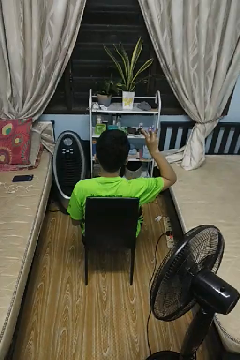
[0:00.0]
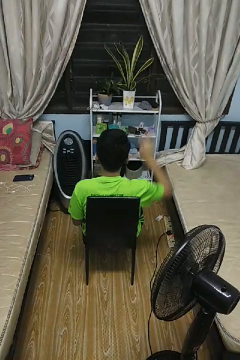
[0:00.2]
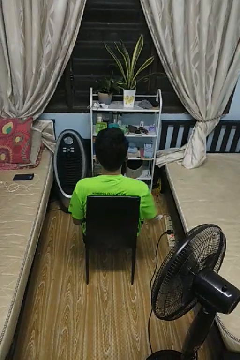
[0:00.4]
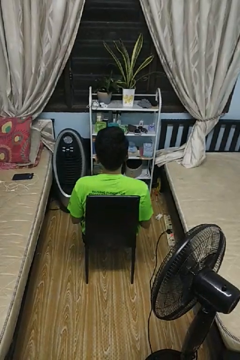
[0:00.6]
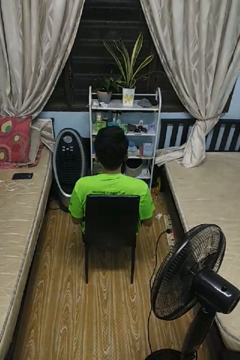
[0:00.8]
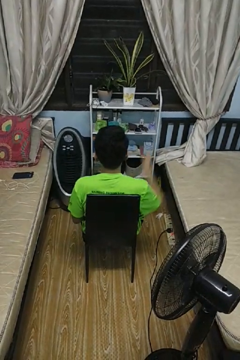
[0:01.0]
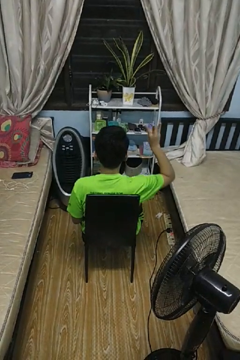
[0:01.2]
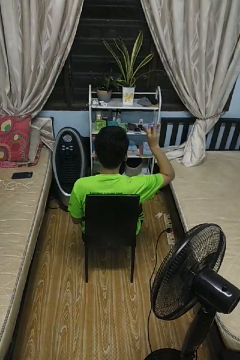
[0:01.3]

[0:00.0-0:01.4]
person gestures number three

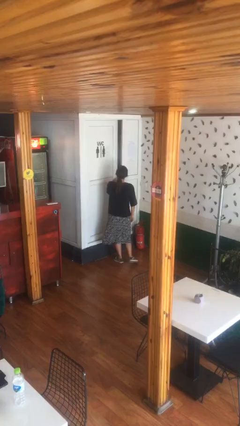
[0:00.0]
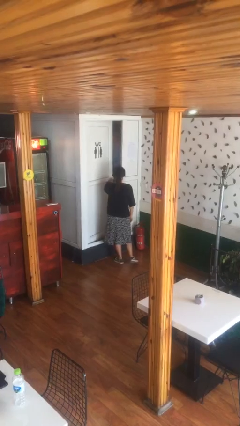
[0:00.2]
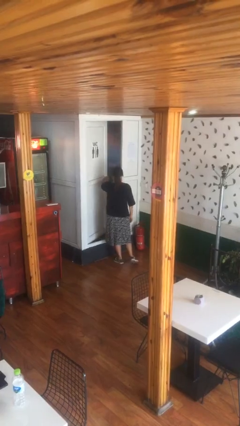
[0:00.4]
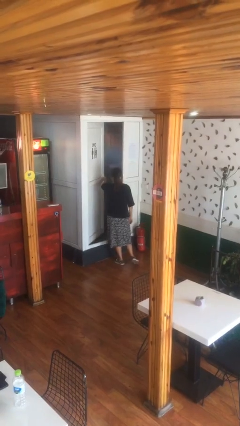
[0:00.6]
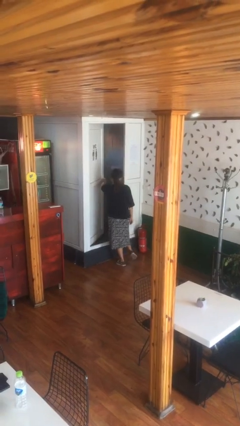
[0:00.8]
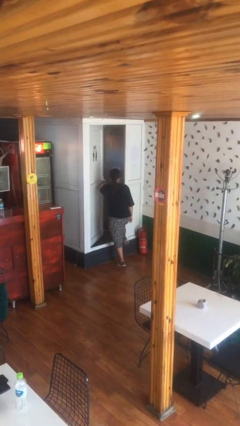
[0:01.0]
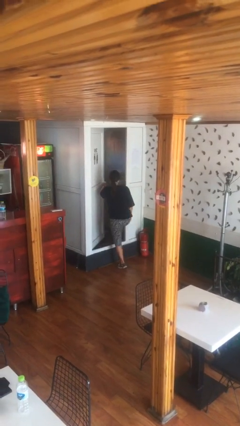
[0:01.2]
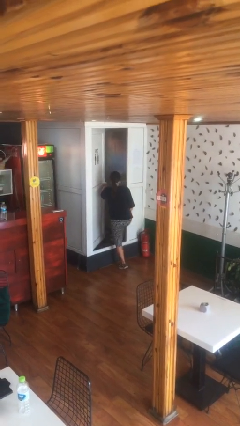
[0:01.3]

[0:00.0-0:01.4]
person opens facility door

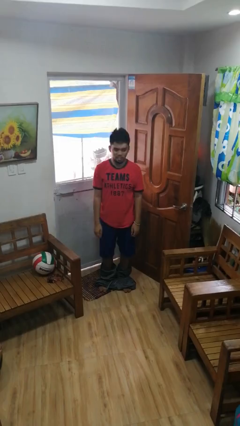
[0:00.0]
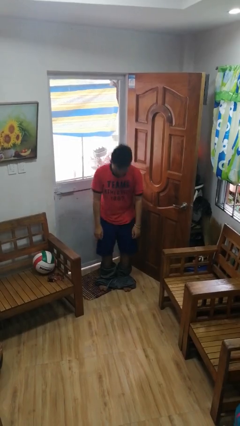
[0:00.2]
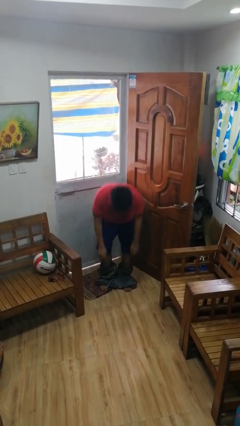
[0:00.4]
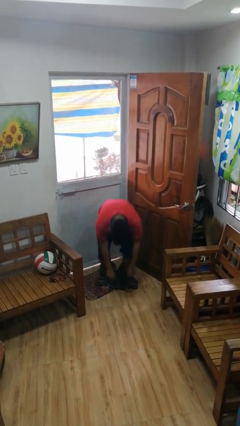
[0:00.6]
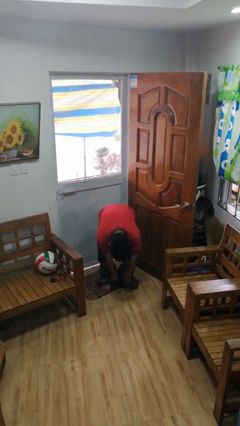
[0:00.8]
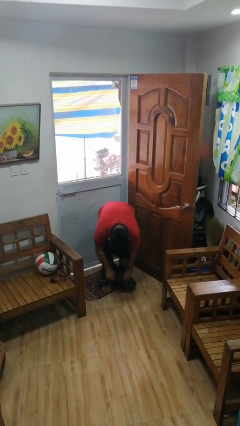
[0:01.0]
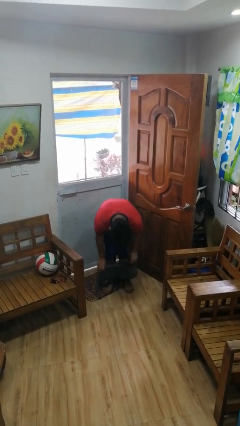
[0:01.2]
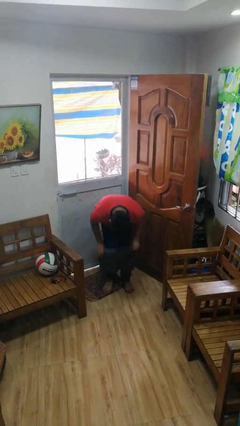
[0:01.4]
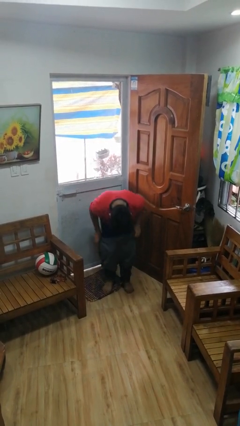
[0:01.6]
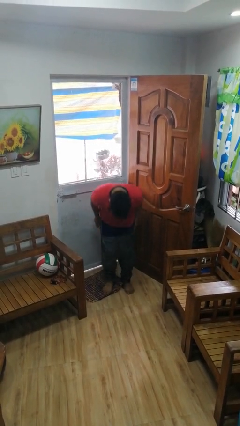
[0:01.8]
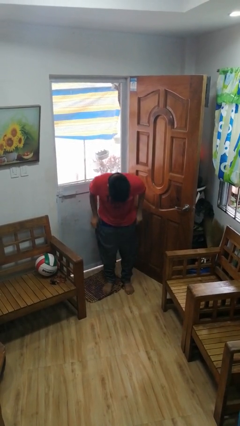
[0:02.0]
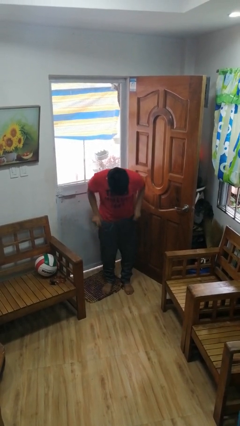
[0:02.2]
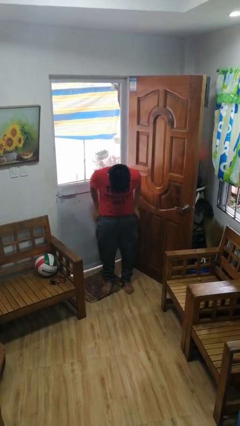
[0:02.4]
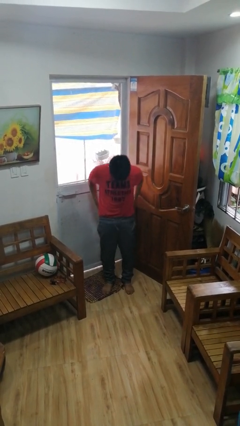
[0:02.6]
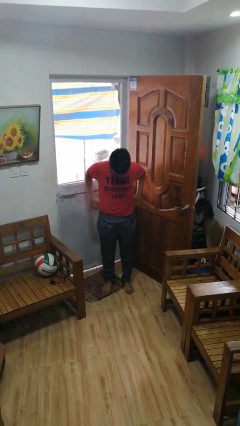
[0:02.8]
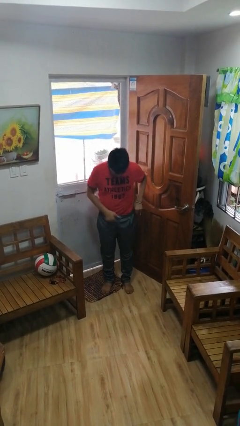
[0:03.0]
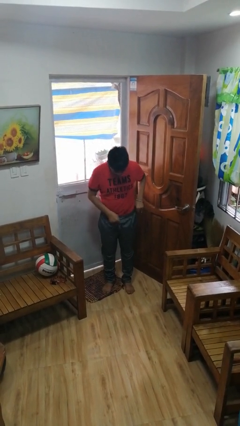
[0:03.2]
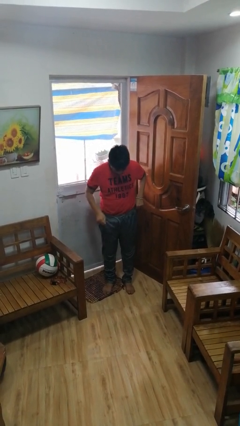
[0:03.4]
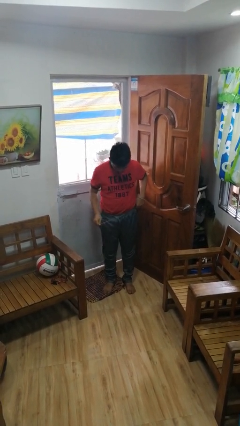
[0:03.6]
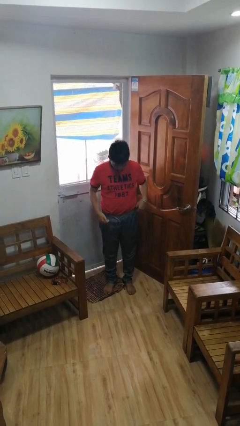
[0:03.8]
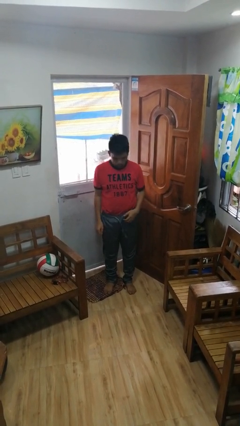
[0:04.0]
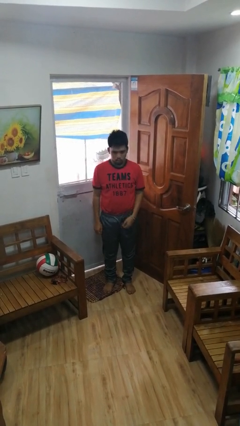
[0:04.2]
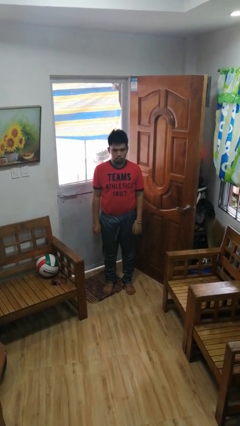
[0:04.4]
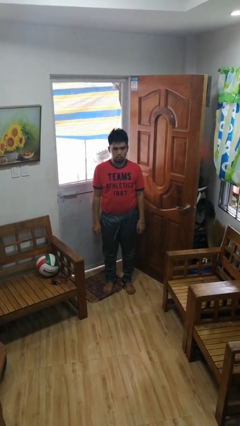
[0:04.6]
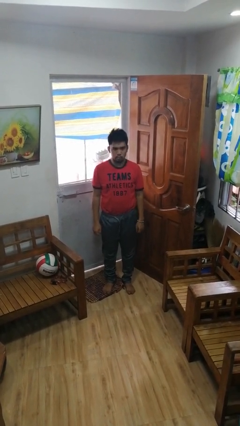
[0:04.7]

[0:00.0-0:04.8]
person puts on pants

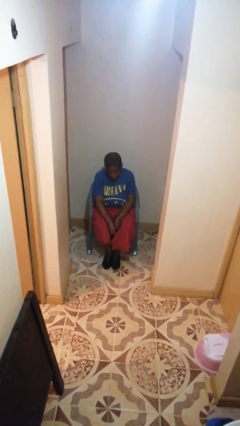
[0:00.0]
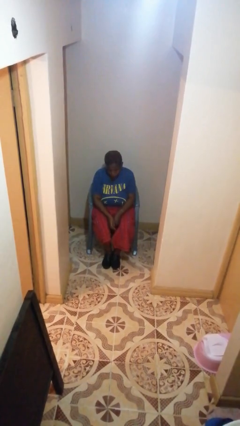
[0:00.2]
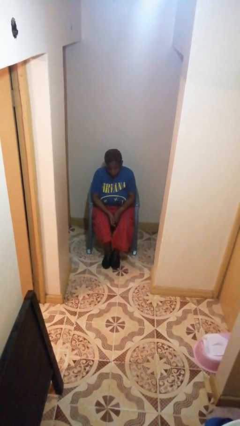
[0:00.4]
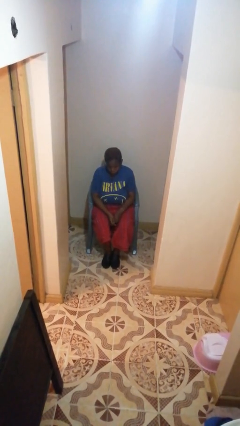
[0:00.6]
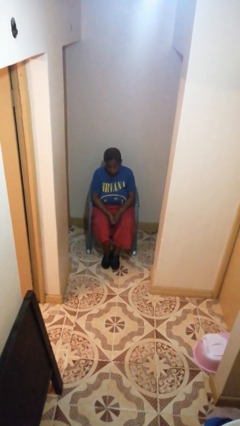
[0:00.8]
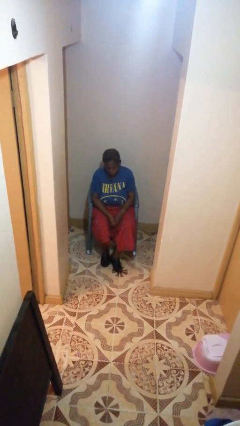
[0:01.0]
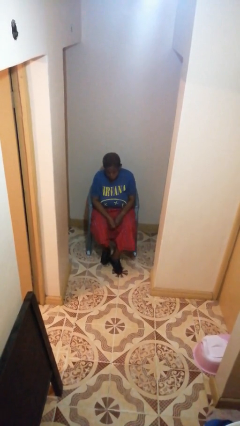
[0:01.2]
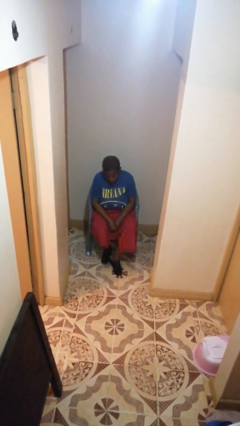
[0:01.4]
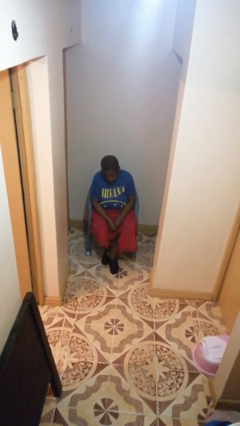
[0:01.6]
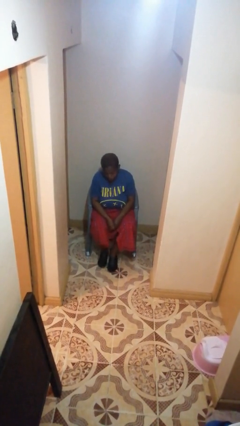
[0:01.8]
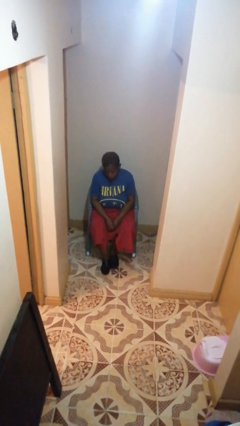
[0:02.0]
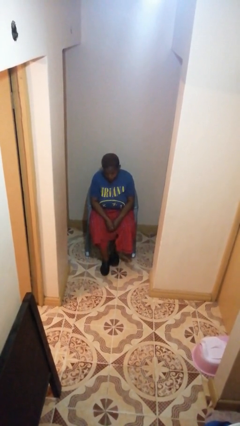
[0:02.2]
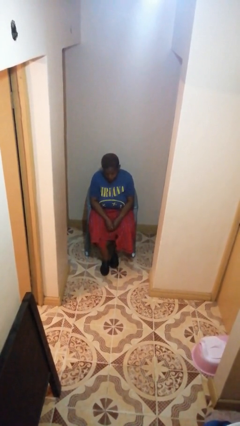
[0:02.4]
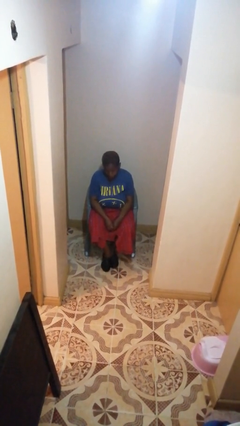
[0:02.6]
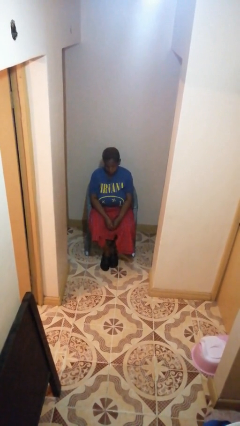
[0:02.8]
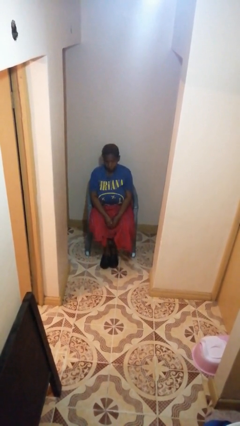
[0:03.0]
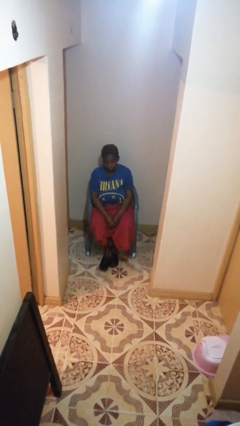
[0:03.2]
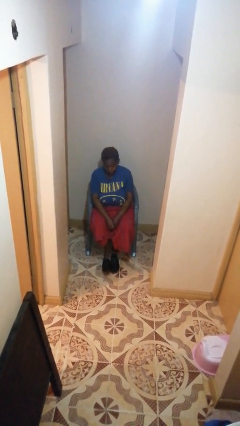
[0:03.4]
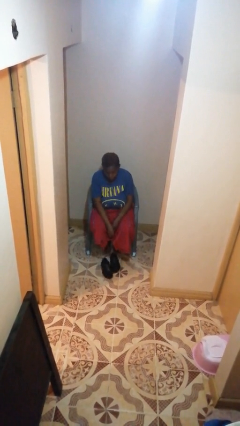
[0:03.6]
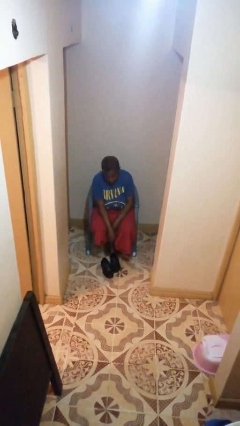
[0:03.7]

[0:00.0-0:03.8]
person takes off shoes

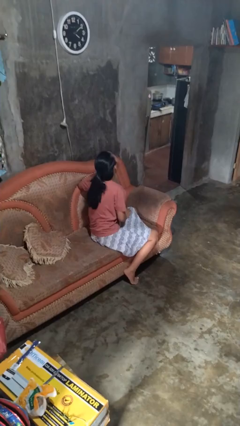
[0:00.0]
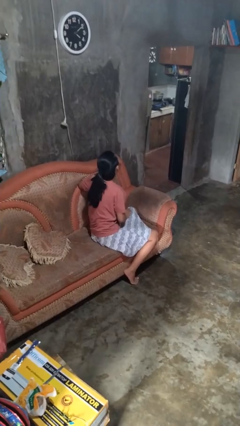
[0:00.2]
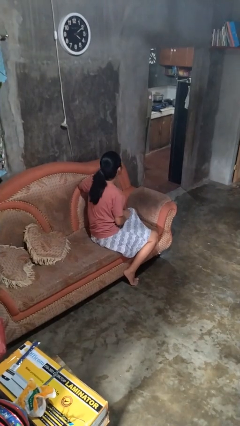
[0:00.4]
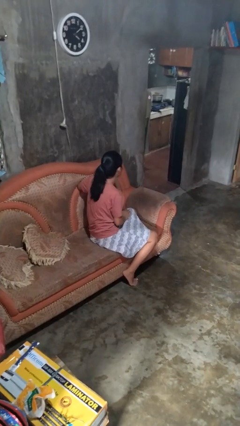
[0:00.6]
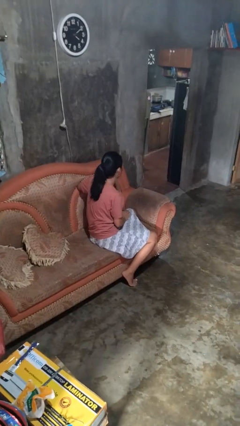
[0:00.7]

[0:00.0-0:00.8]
person yawns

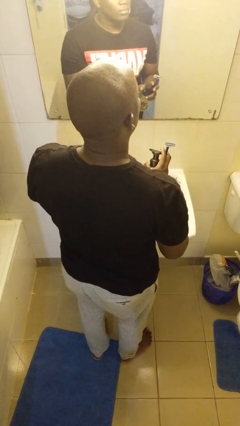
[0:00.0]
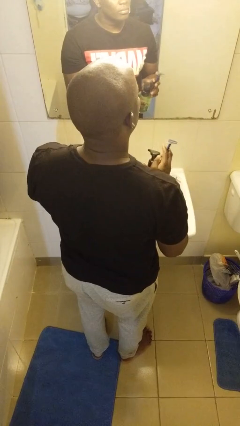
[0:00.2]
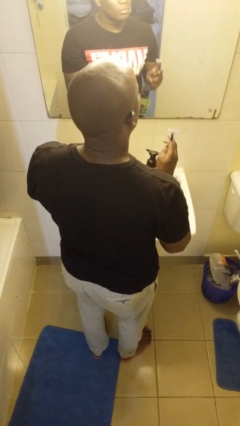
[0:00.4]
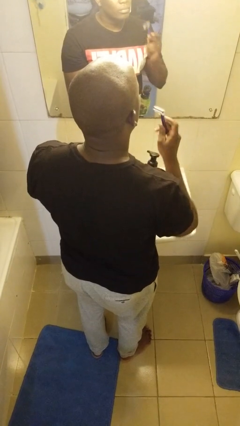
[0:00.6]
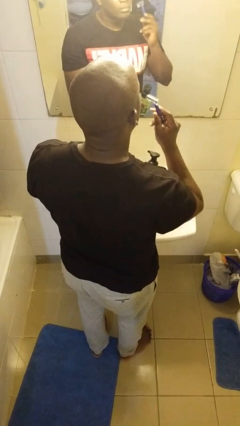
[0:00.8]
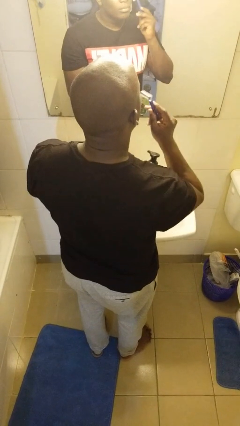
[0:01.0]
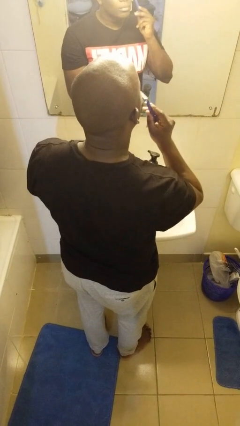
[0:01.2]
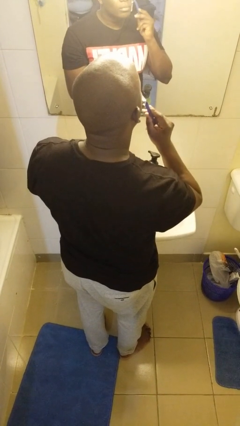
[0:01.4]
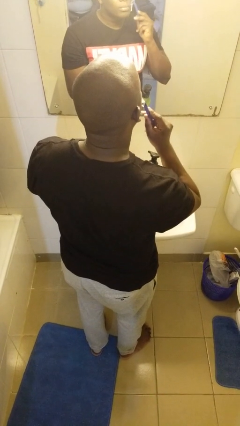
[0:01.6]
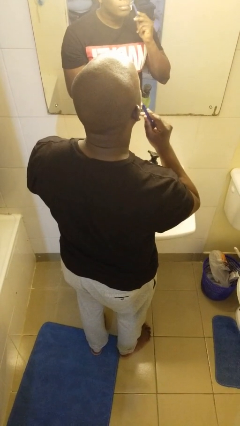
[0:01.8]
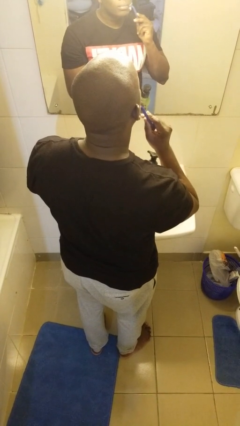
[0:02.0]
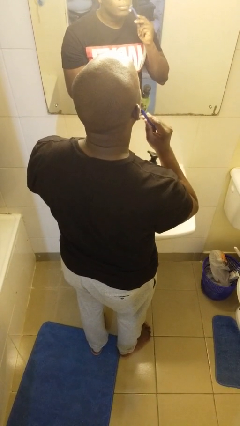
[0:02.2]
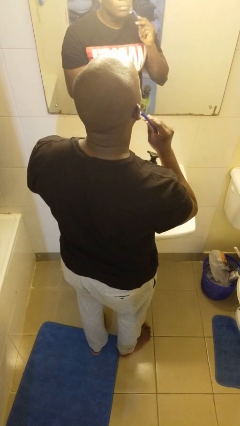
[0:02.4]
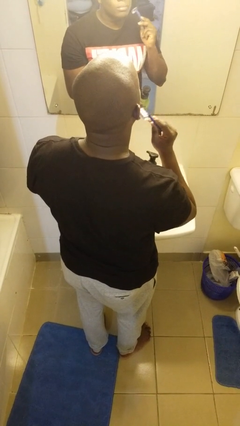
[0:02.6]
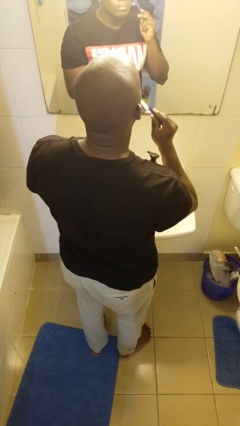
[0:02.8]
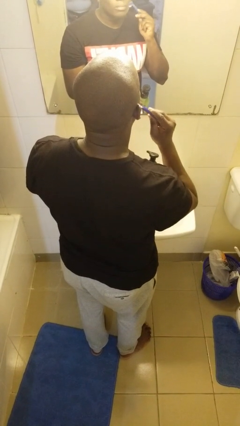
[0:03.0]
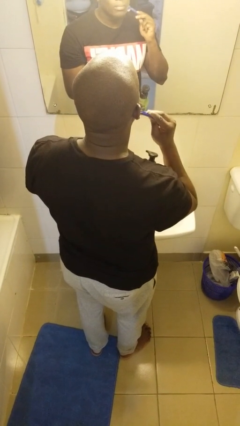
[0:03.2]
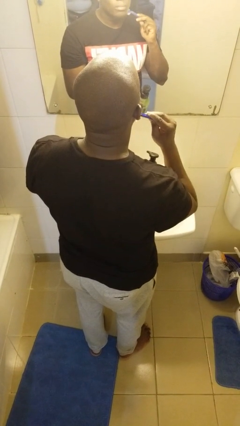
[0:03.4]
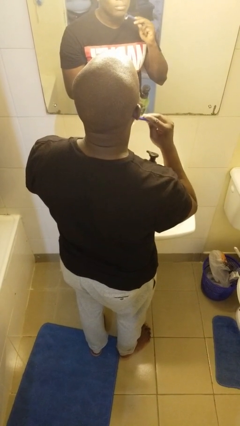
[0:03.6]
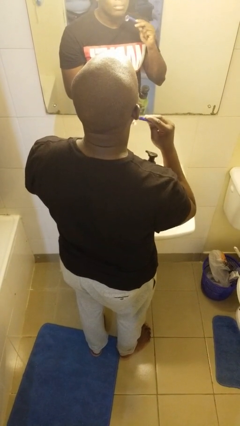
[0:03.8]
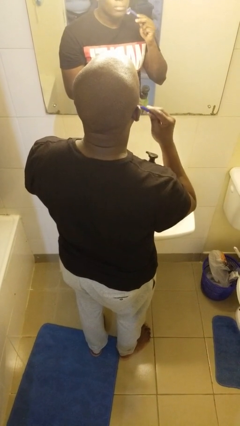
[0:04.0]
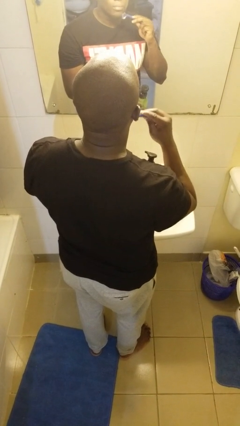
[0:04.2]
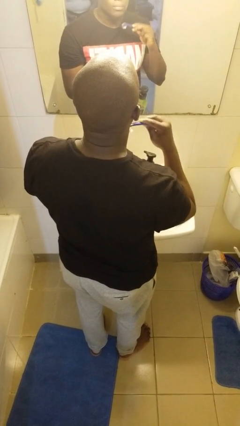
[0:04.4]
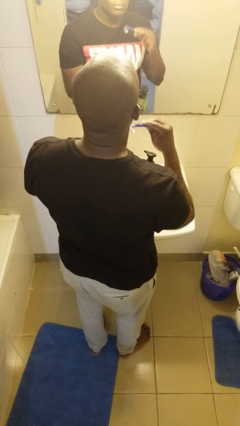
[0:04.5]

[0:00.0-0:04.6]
person shaves face

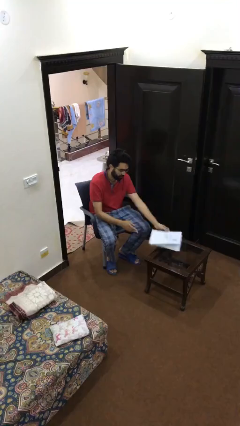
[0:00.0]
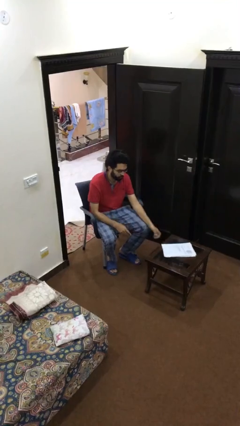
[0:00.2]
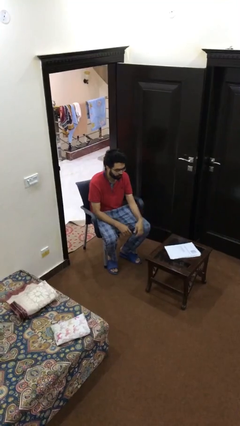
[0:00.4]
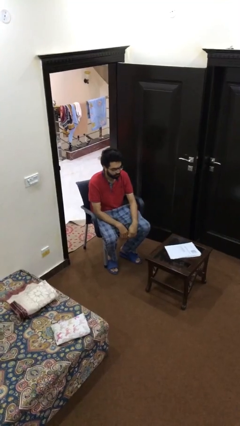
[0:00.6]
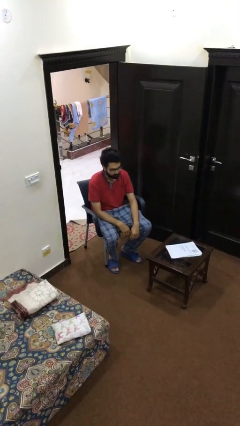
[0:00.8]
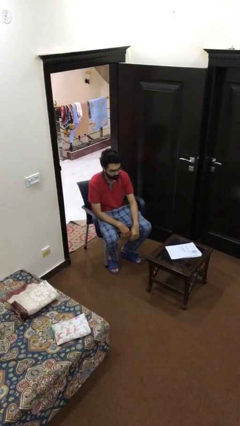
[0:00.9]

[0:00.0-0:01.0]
person puts down object on table
